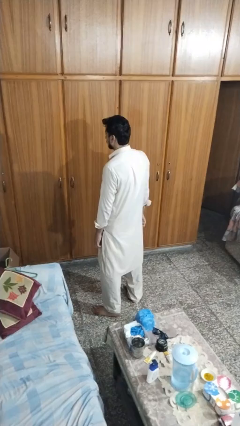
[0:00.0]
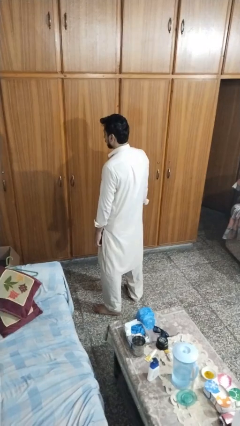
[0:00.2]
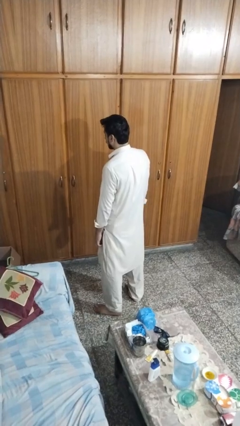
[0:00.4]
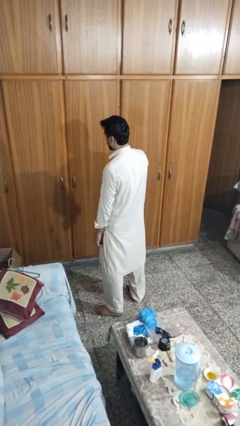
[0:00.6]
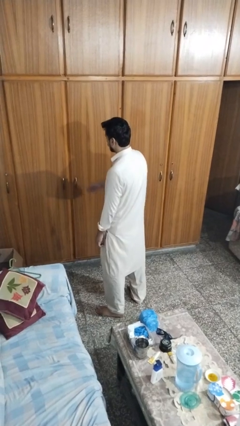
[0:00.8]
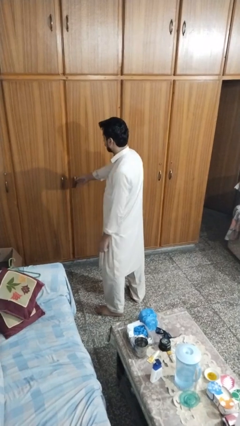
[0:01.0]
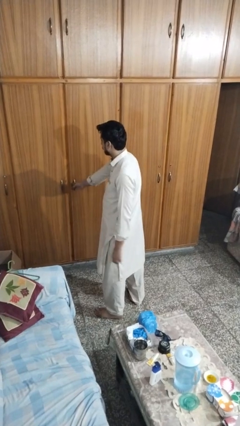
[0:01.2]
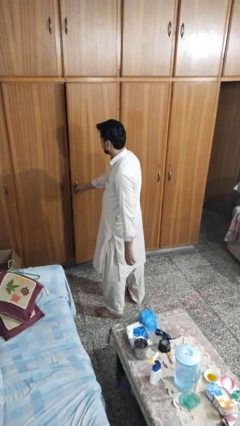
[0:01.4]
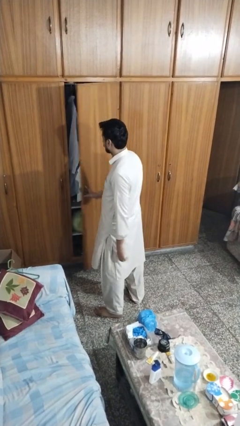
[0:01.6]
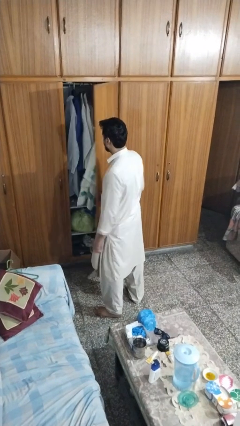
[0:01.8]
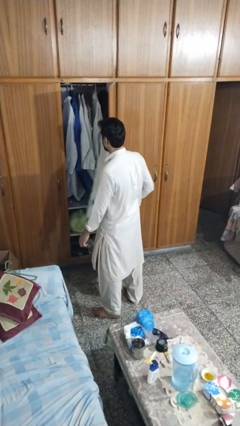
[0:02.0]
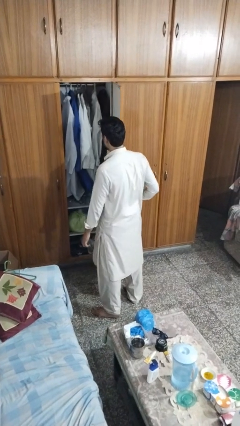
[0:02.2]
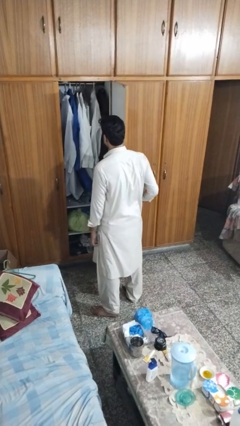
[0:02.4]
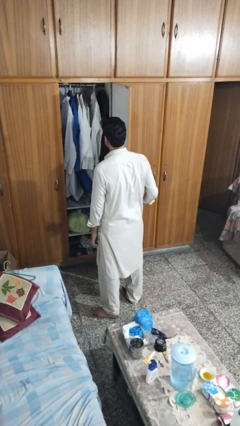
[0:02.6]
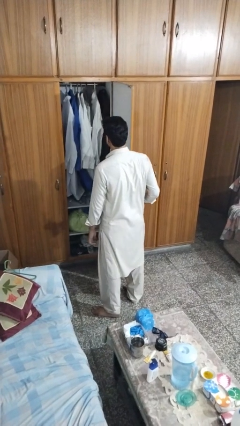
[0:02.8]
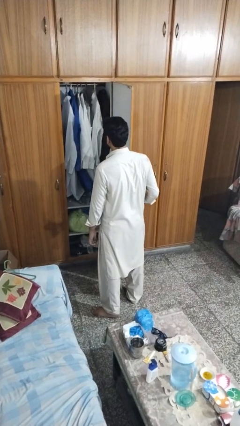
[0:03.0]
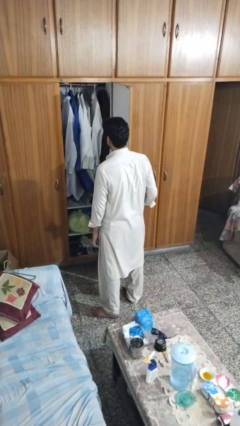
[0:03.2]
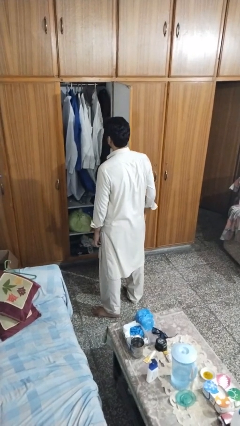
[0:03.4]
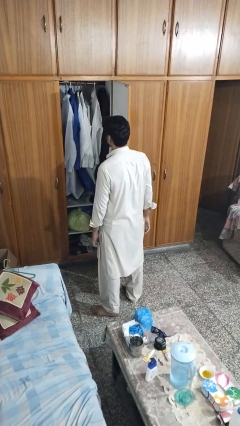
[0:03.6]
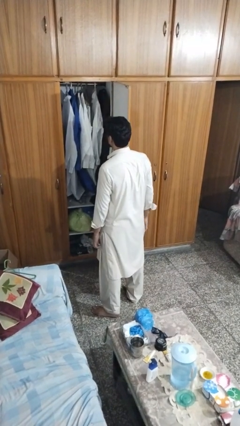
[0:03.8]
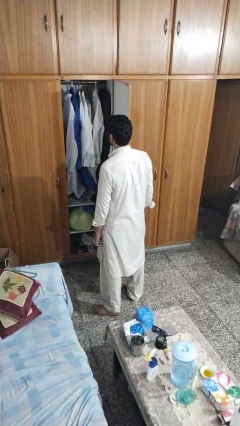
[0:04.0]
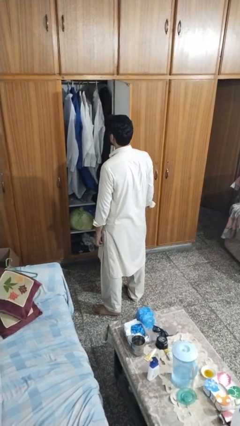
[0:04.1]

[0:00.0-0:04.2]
person opens closet door

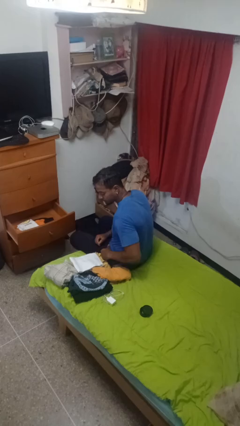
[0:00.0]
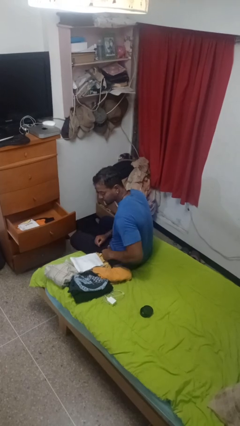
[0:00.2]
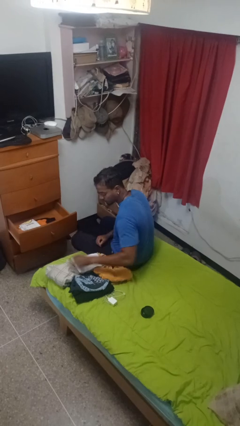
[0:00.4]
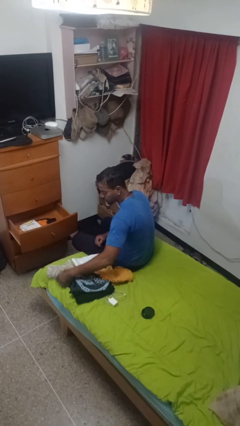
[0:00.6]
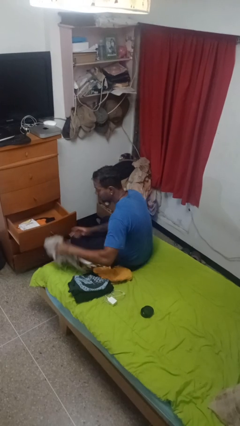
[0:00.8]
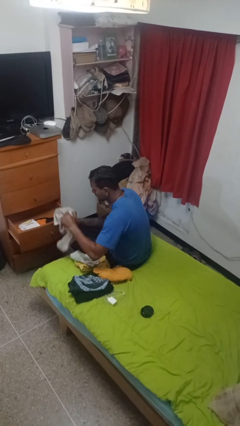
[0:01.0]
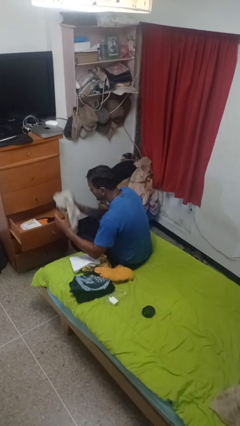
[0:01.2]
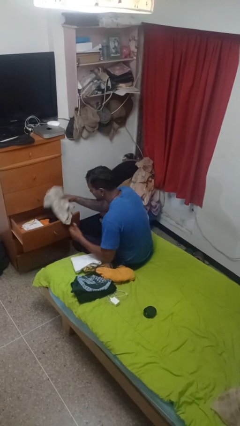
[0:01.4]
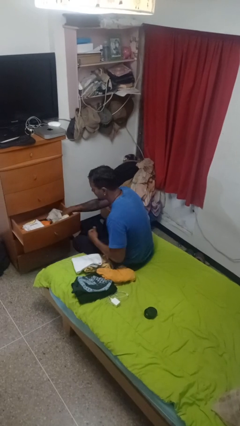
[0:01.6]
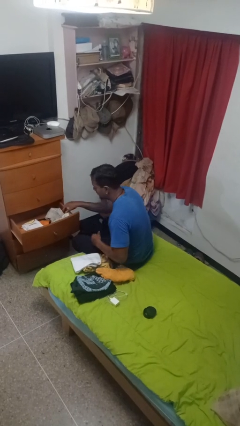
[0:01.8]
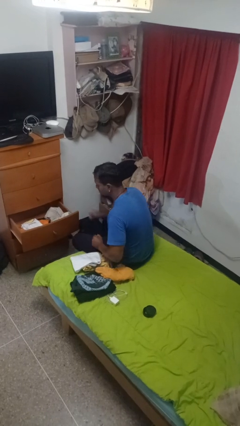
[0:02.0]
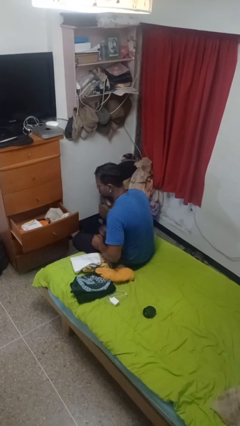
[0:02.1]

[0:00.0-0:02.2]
person puts clothes into dresser

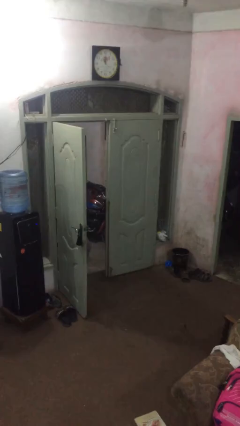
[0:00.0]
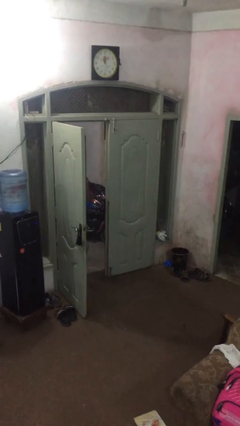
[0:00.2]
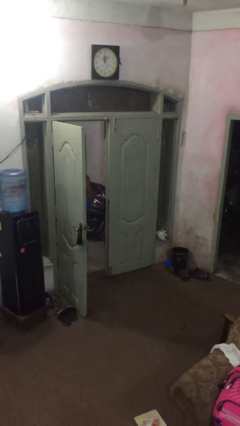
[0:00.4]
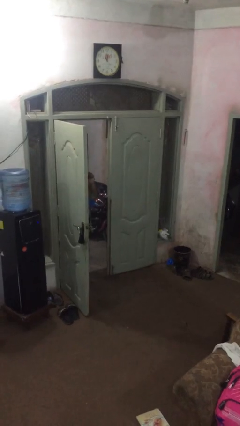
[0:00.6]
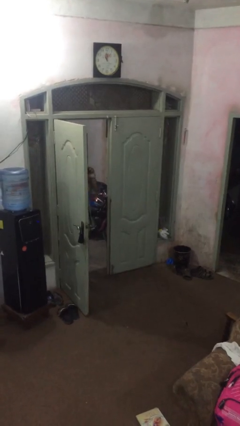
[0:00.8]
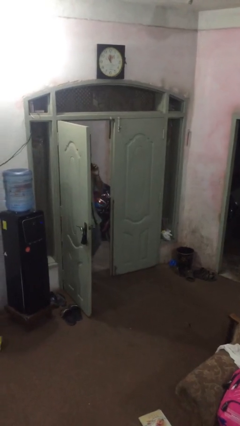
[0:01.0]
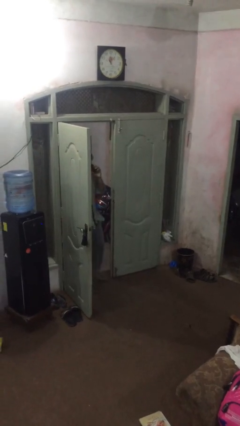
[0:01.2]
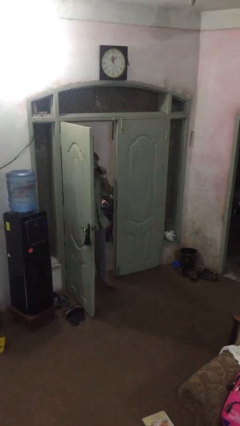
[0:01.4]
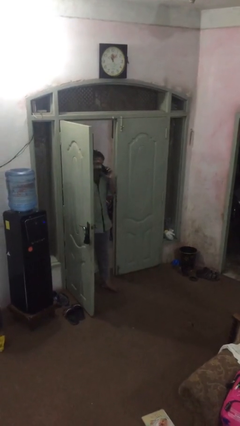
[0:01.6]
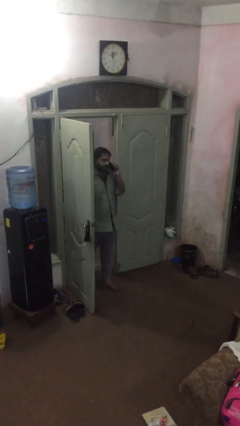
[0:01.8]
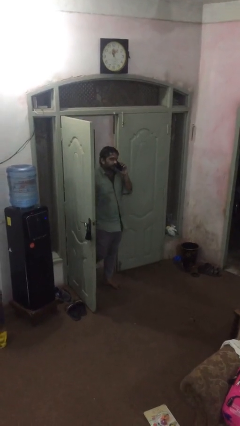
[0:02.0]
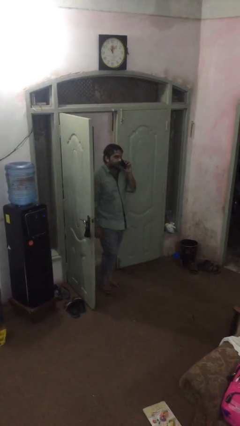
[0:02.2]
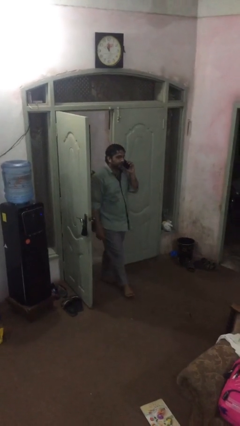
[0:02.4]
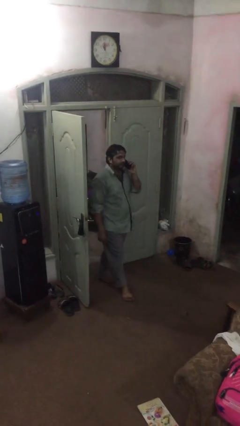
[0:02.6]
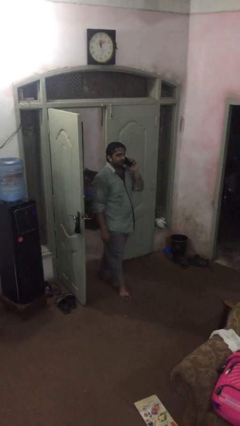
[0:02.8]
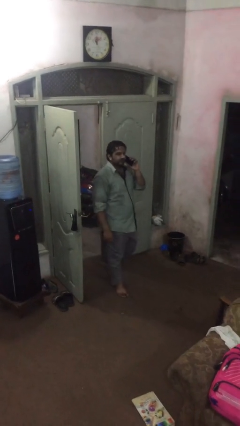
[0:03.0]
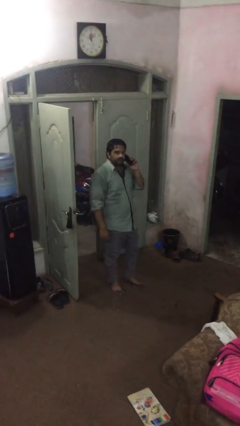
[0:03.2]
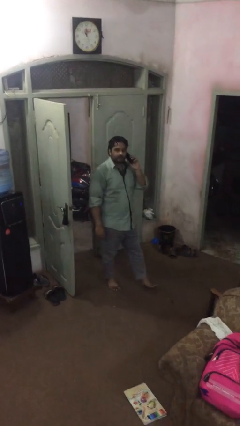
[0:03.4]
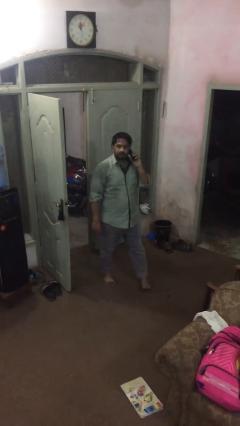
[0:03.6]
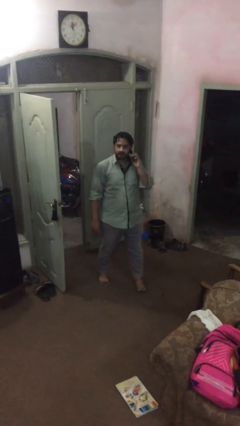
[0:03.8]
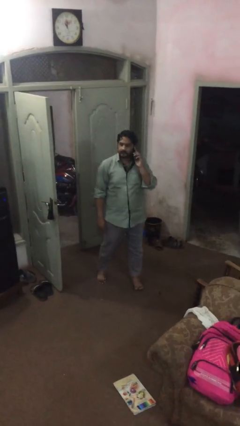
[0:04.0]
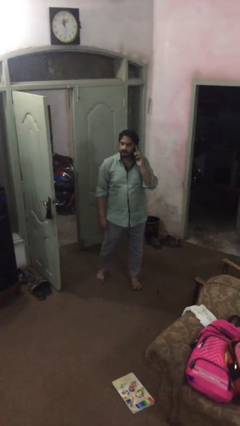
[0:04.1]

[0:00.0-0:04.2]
person enters scene through structure

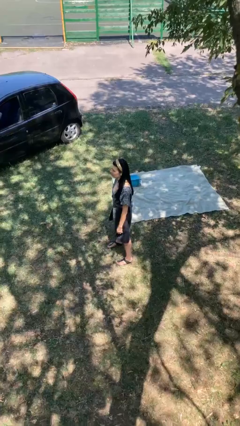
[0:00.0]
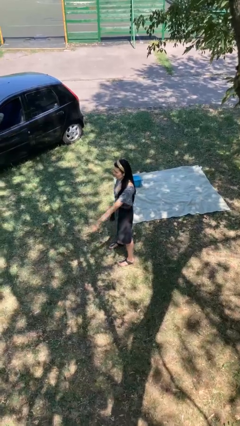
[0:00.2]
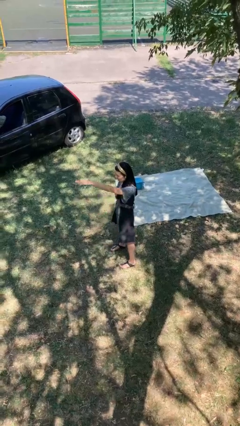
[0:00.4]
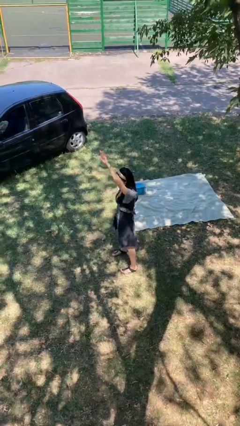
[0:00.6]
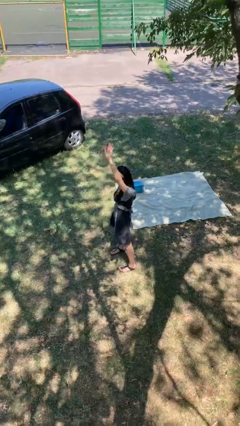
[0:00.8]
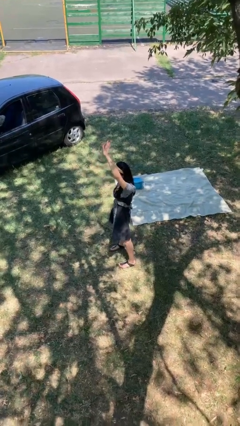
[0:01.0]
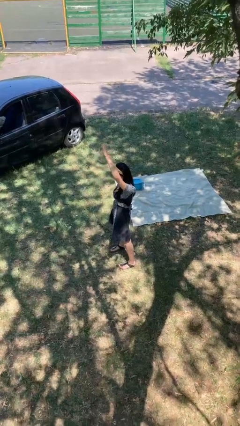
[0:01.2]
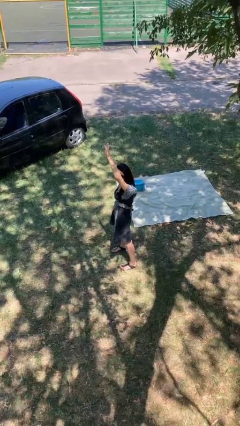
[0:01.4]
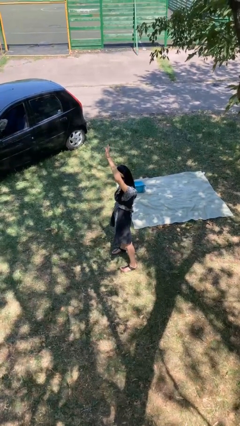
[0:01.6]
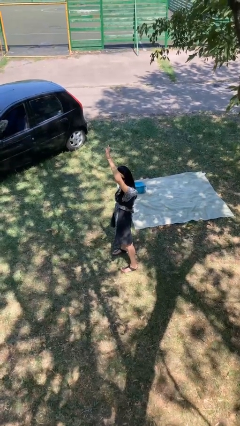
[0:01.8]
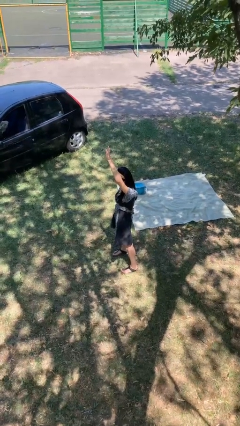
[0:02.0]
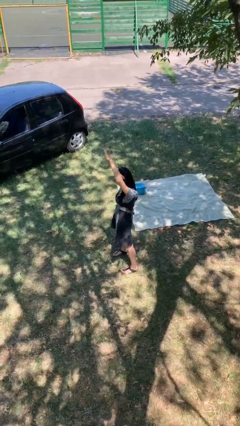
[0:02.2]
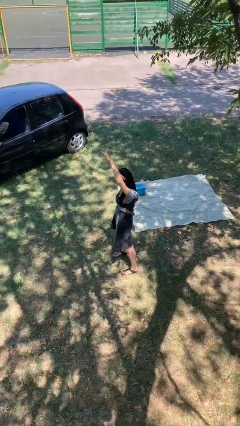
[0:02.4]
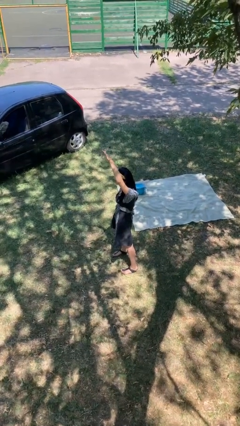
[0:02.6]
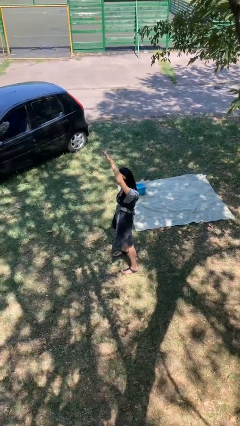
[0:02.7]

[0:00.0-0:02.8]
person gestures raise hand

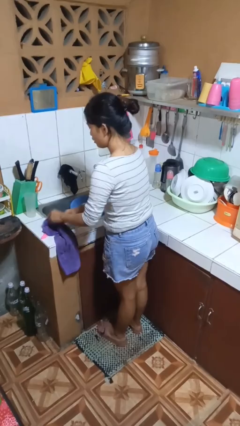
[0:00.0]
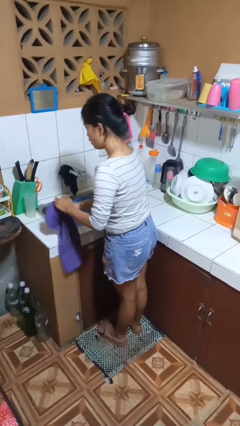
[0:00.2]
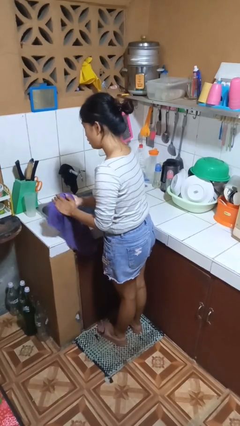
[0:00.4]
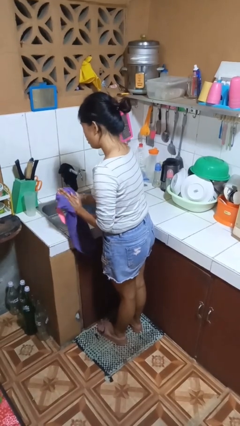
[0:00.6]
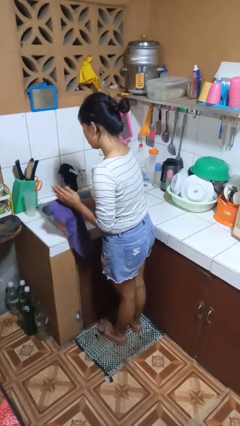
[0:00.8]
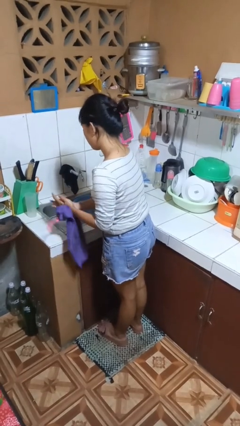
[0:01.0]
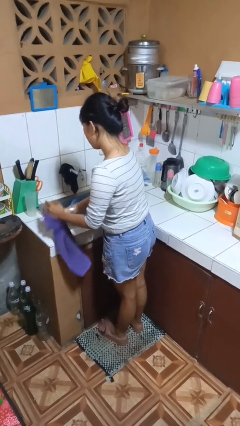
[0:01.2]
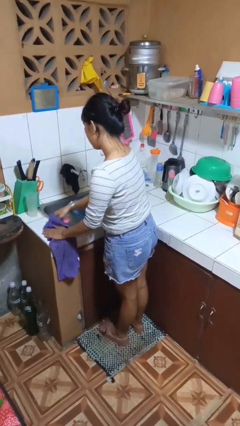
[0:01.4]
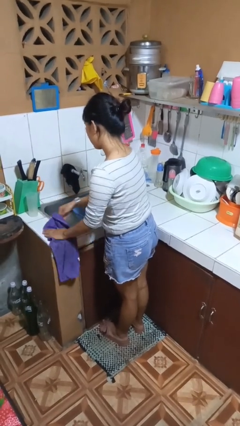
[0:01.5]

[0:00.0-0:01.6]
person dries hands with towel

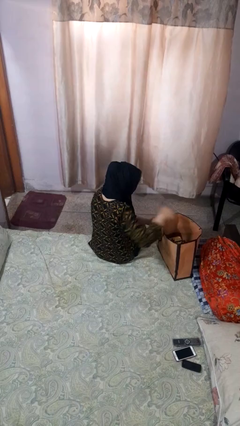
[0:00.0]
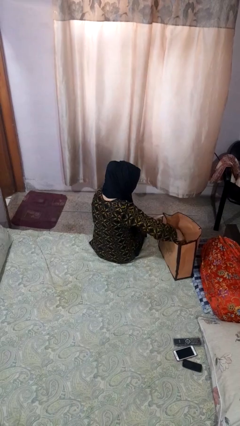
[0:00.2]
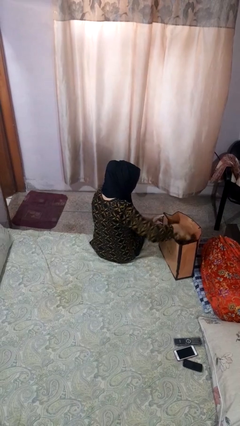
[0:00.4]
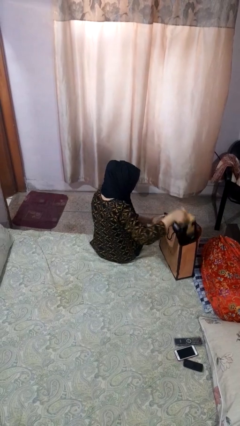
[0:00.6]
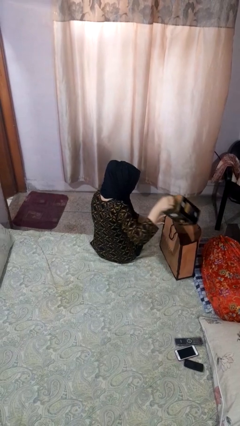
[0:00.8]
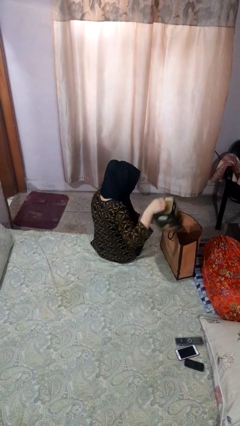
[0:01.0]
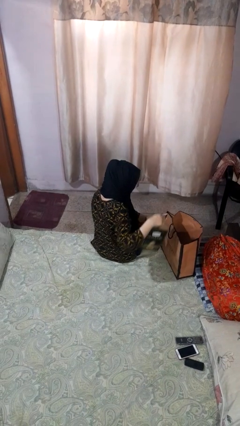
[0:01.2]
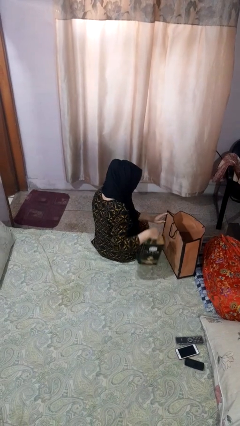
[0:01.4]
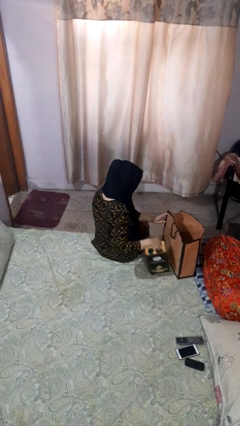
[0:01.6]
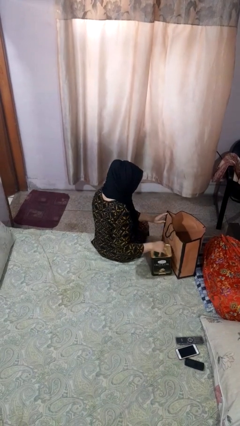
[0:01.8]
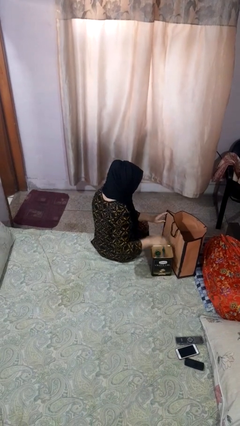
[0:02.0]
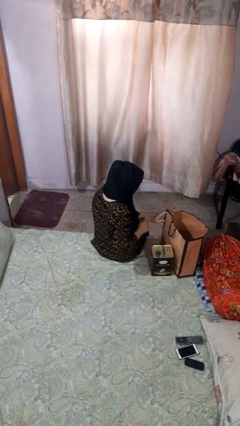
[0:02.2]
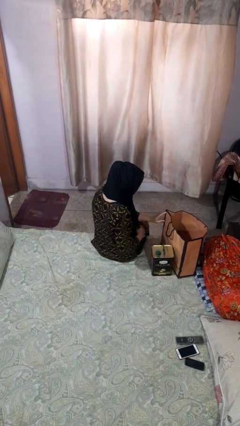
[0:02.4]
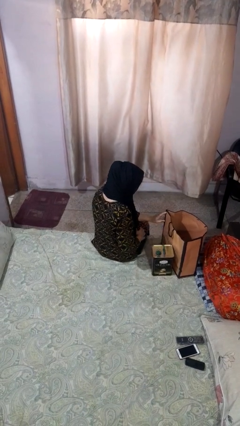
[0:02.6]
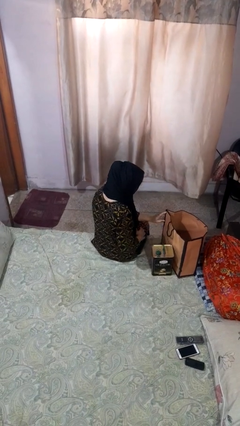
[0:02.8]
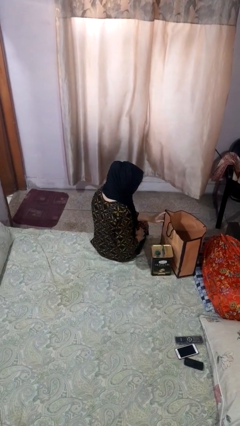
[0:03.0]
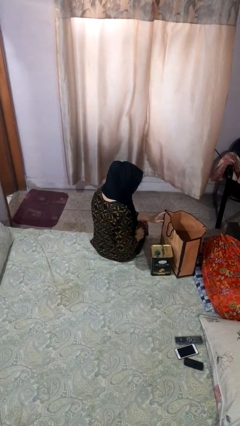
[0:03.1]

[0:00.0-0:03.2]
person takes object from bag
